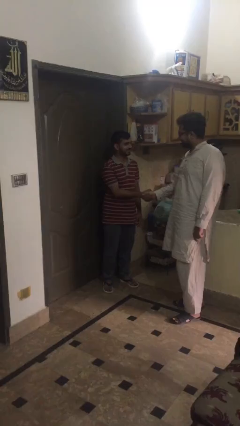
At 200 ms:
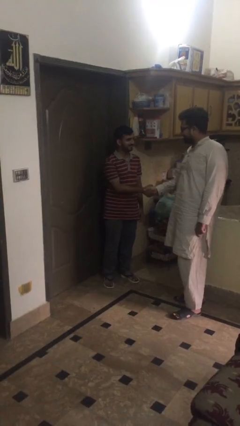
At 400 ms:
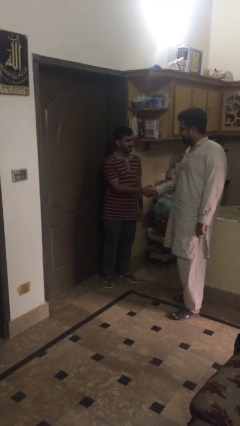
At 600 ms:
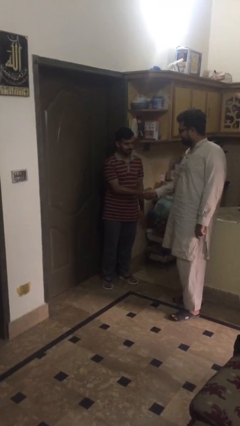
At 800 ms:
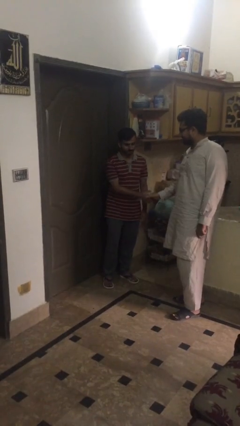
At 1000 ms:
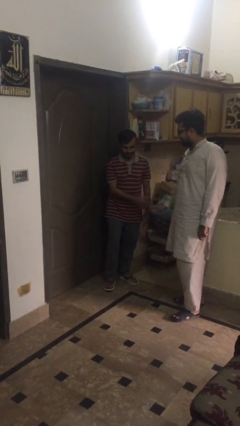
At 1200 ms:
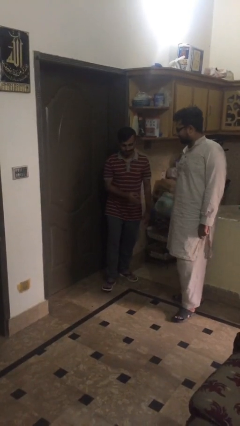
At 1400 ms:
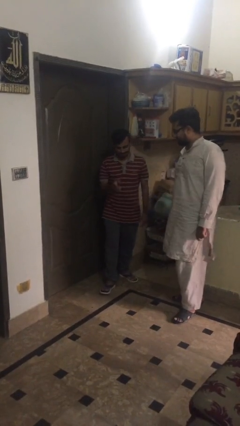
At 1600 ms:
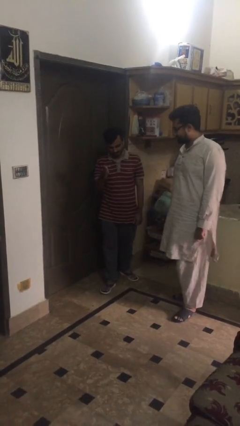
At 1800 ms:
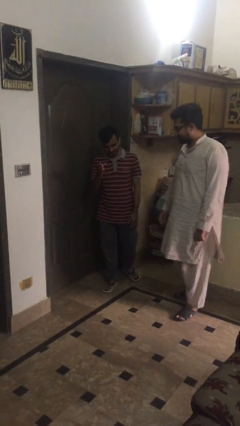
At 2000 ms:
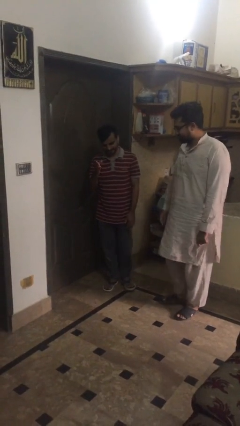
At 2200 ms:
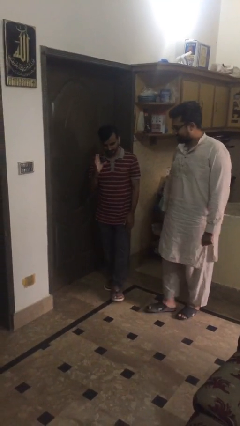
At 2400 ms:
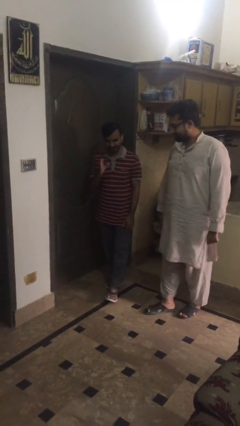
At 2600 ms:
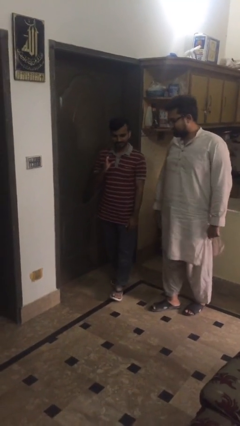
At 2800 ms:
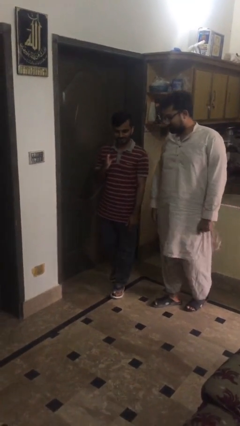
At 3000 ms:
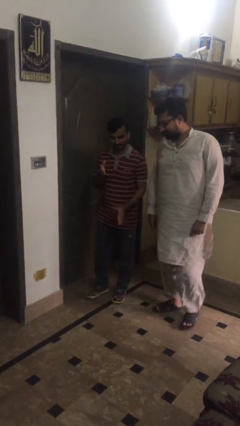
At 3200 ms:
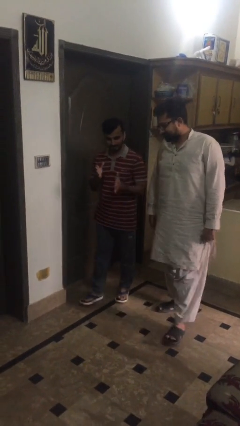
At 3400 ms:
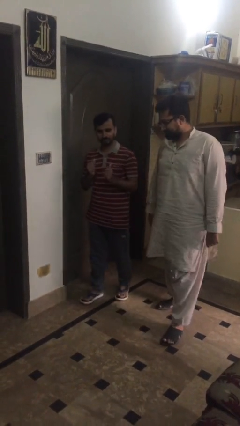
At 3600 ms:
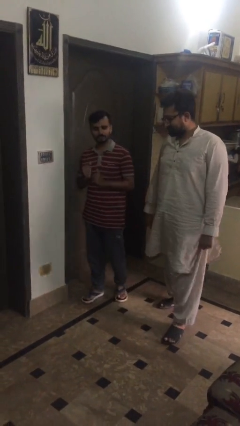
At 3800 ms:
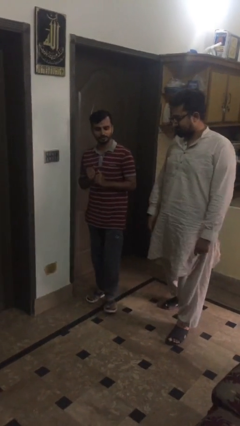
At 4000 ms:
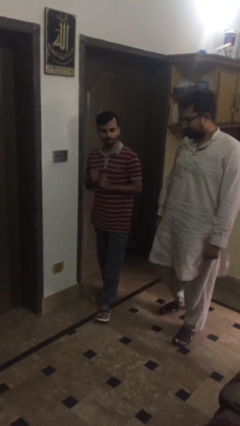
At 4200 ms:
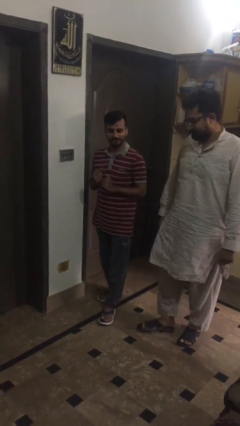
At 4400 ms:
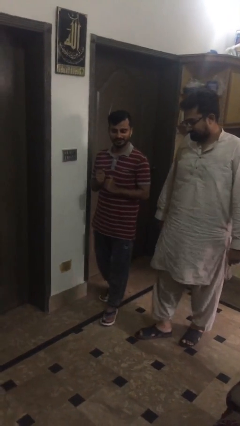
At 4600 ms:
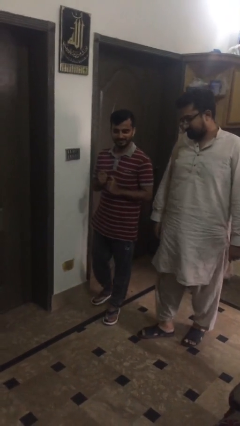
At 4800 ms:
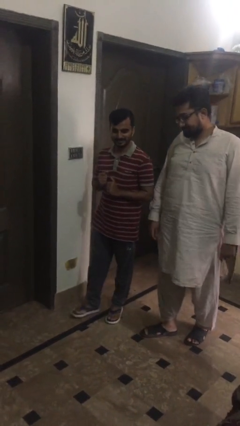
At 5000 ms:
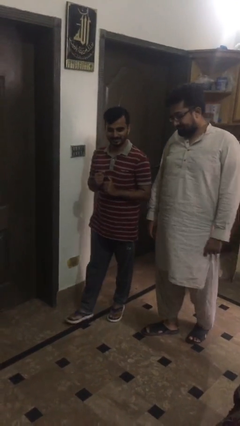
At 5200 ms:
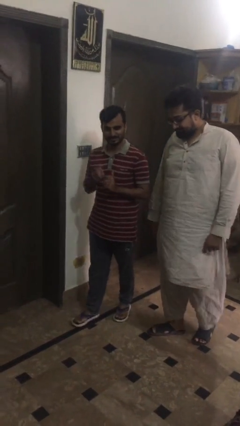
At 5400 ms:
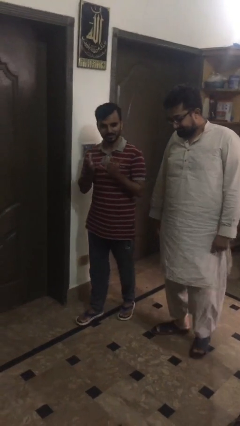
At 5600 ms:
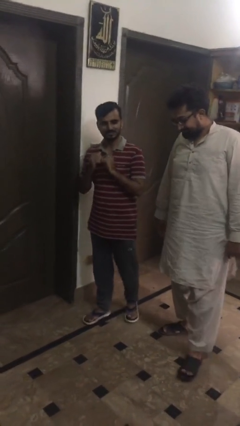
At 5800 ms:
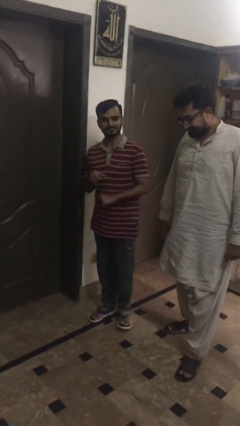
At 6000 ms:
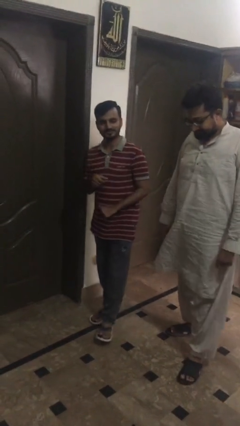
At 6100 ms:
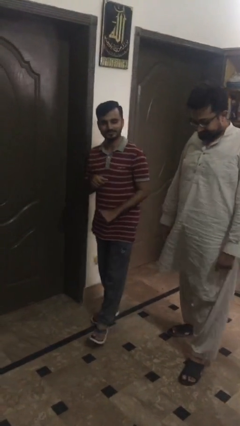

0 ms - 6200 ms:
person talks to person

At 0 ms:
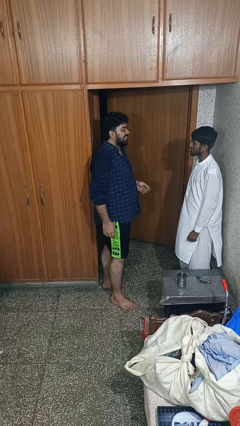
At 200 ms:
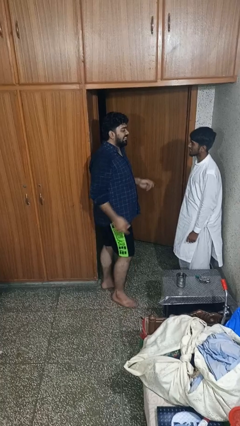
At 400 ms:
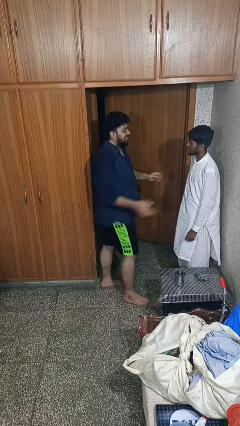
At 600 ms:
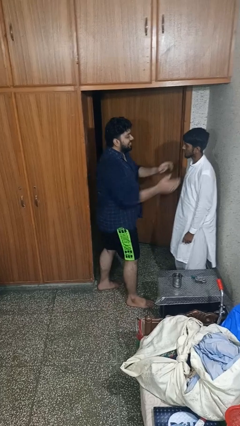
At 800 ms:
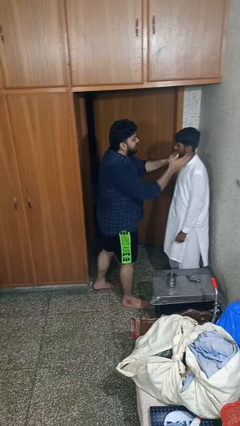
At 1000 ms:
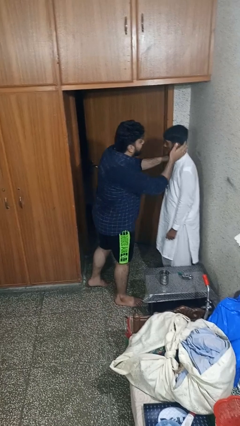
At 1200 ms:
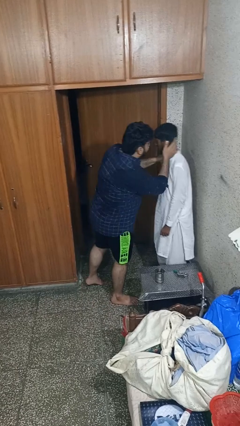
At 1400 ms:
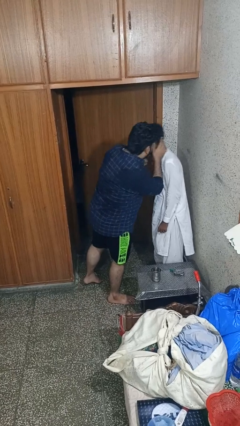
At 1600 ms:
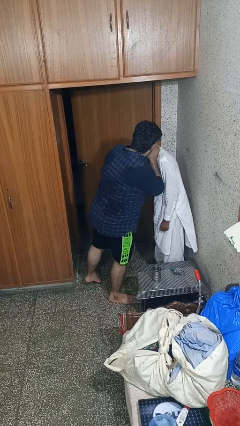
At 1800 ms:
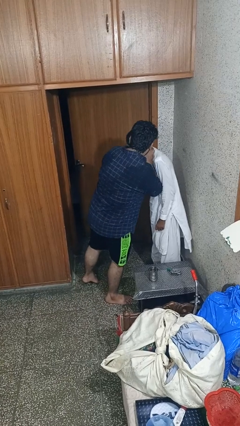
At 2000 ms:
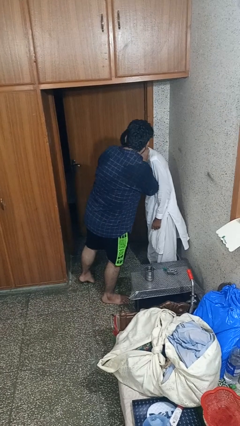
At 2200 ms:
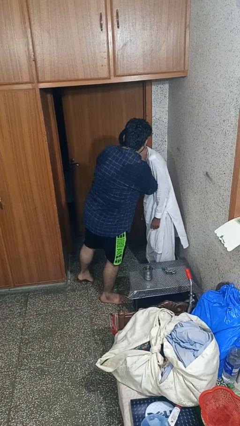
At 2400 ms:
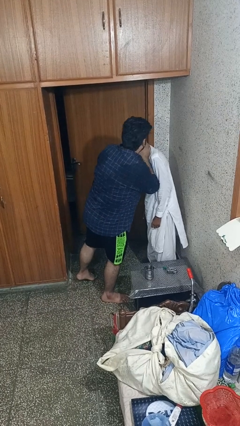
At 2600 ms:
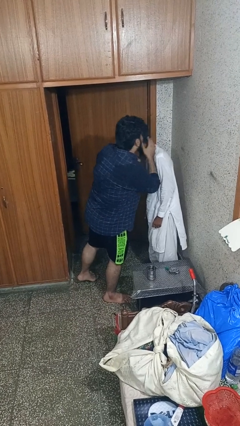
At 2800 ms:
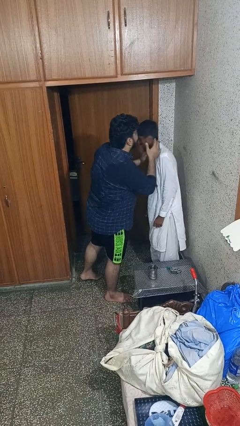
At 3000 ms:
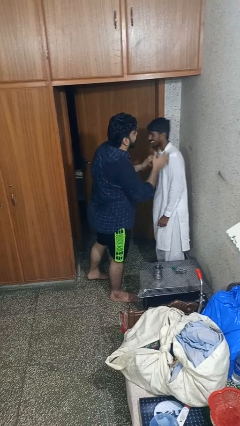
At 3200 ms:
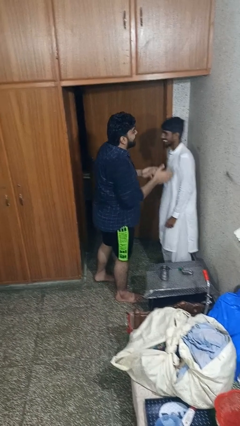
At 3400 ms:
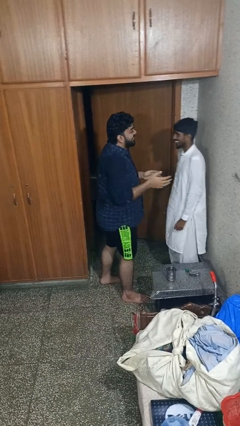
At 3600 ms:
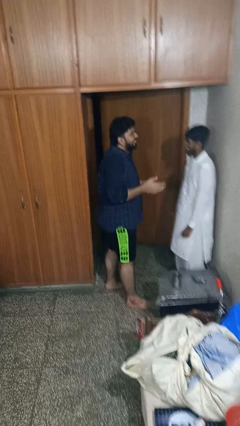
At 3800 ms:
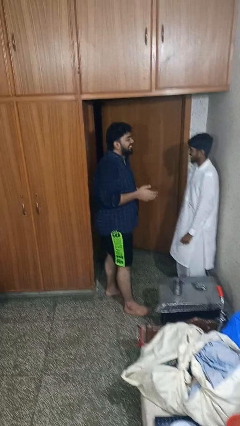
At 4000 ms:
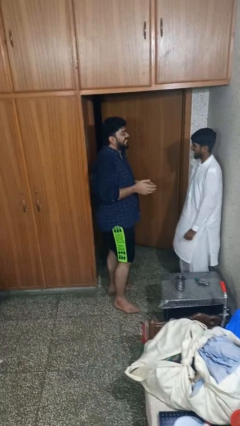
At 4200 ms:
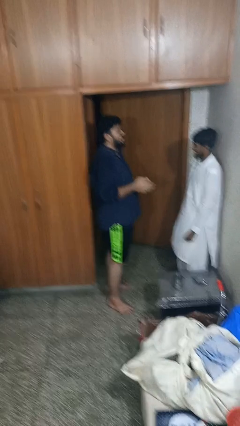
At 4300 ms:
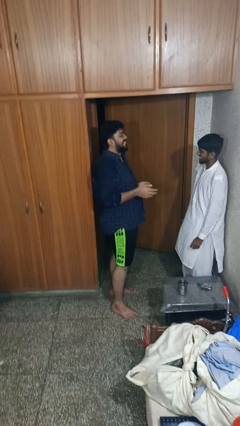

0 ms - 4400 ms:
person kisses cheek of person

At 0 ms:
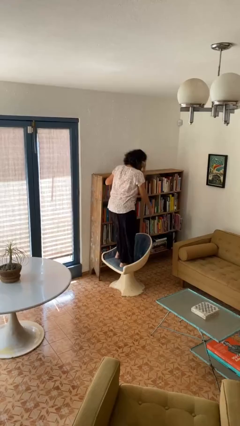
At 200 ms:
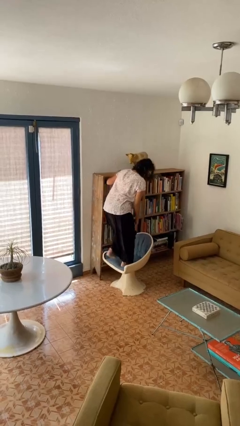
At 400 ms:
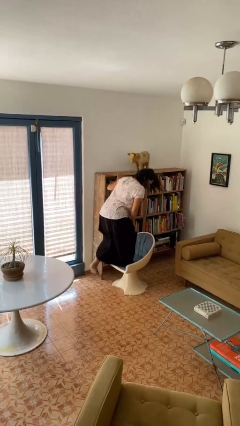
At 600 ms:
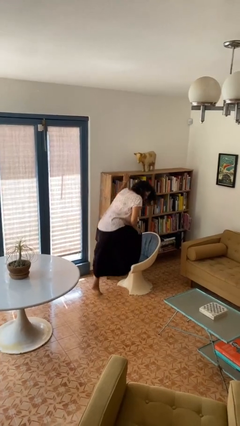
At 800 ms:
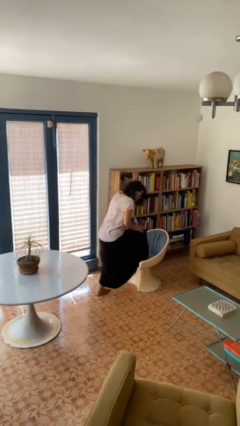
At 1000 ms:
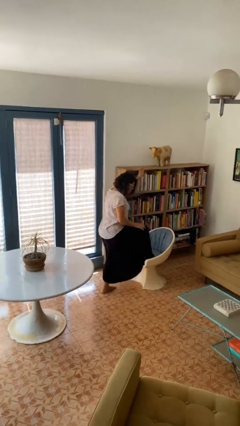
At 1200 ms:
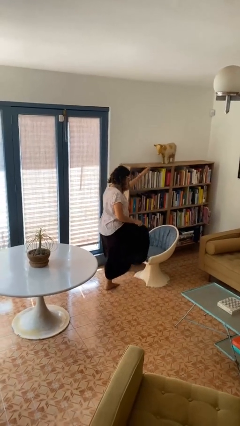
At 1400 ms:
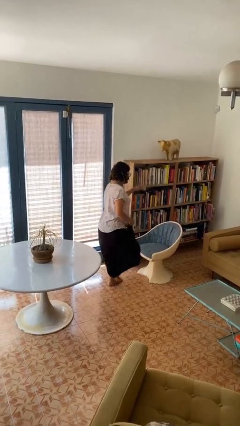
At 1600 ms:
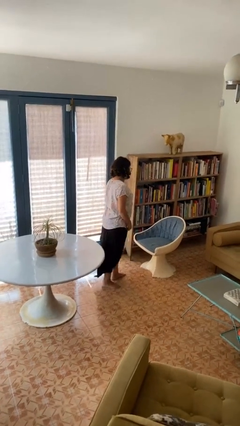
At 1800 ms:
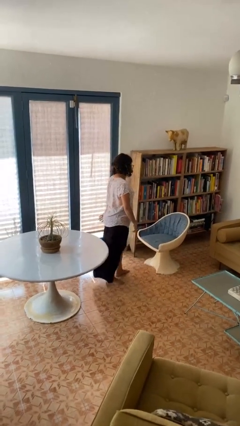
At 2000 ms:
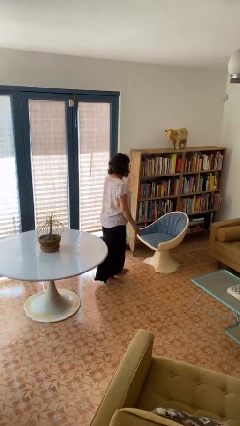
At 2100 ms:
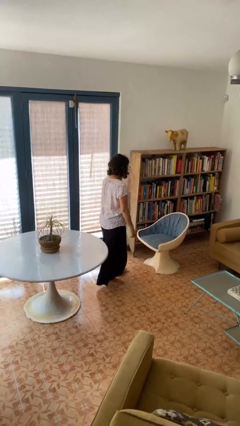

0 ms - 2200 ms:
person climbs off chair

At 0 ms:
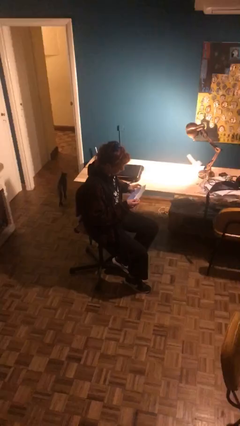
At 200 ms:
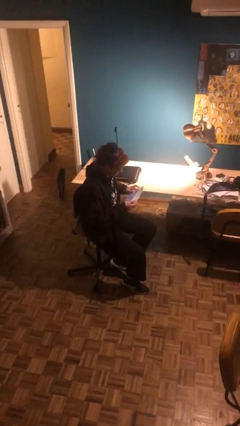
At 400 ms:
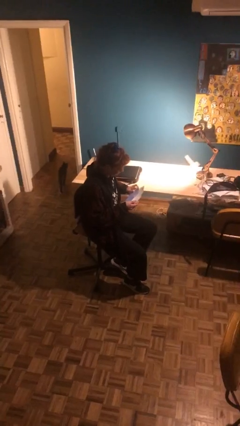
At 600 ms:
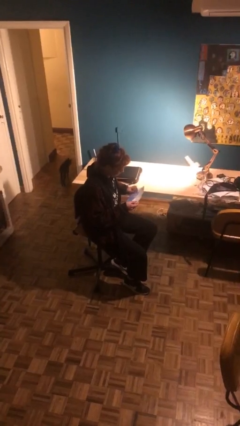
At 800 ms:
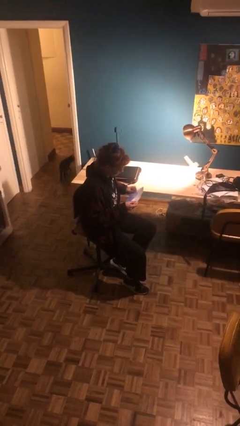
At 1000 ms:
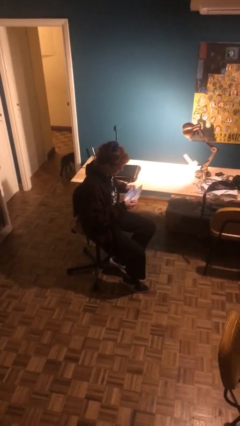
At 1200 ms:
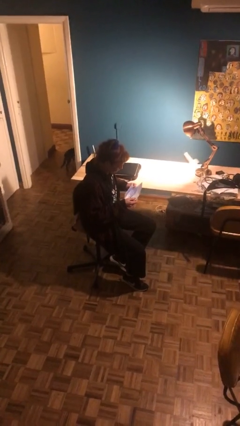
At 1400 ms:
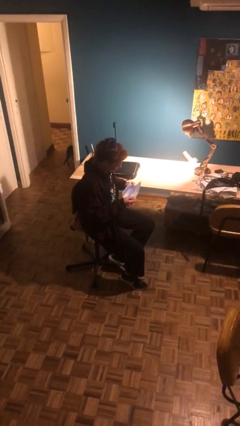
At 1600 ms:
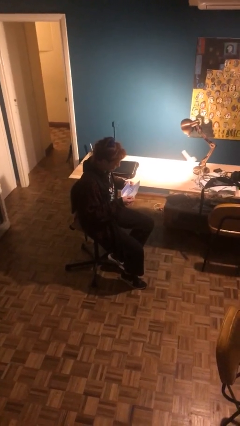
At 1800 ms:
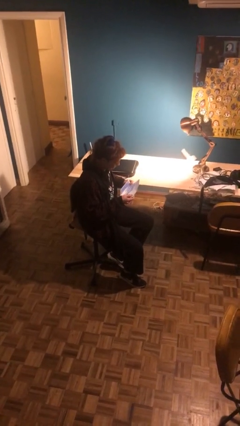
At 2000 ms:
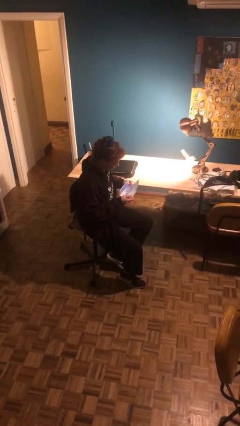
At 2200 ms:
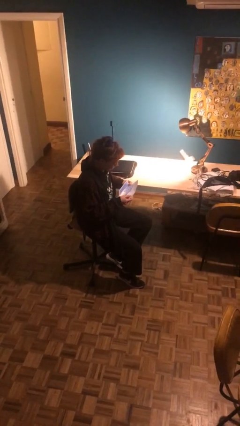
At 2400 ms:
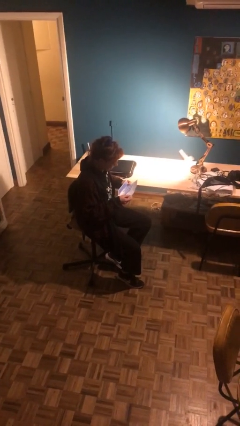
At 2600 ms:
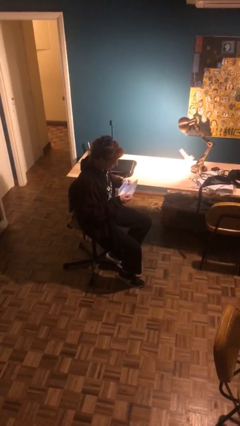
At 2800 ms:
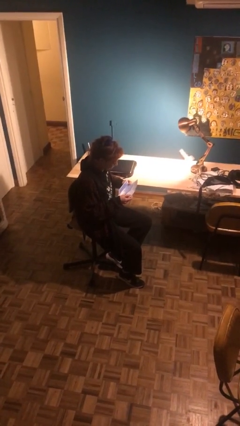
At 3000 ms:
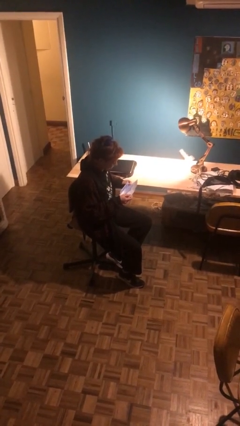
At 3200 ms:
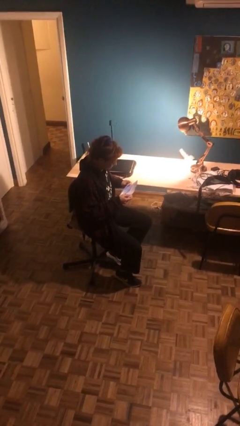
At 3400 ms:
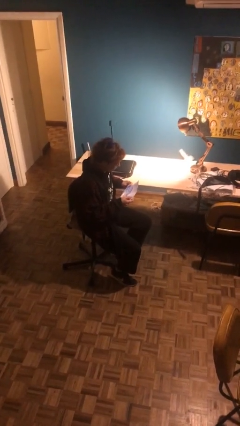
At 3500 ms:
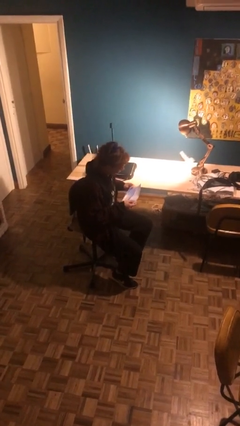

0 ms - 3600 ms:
person reads document

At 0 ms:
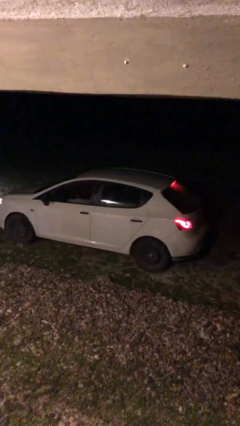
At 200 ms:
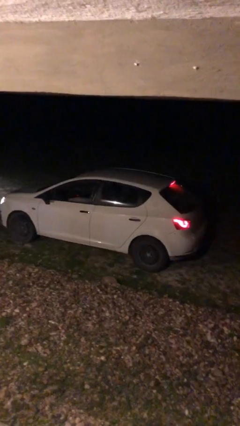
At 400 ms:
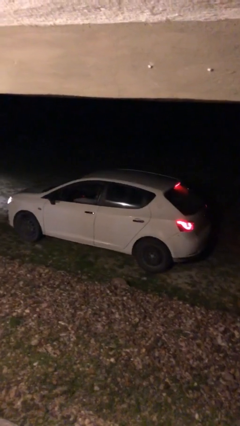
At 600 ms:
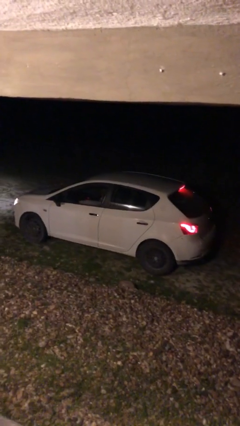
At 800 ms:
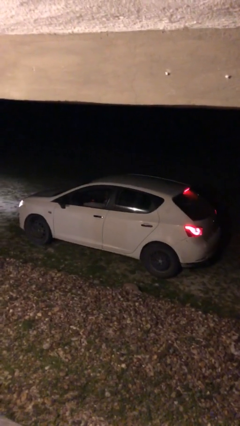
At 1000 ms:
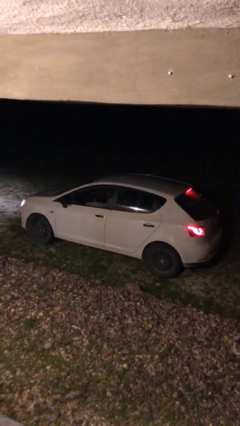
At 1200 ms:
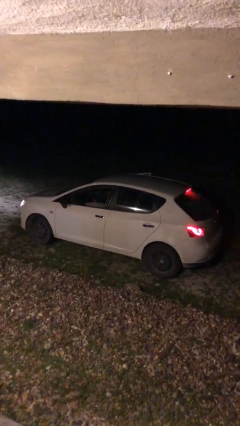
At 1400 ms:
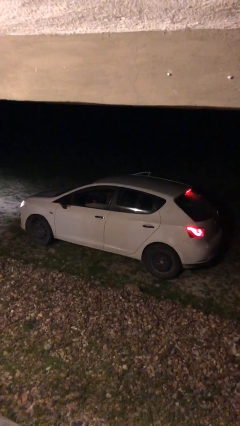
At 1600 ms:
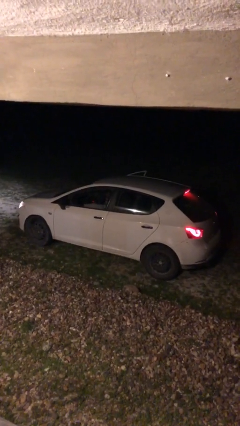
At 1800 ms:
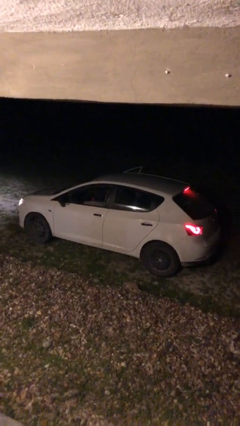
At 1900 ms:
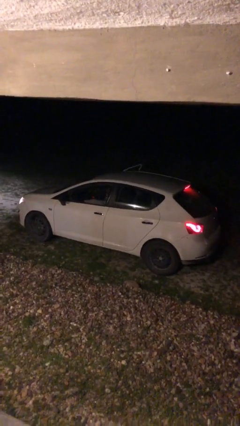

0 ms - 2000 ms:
car drops off person
